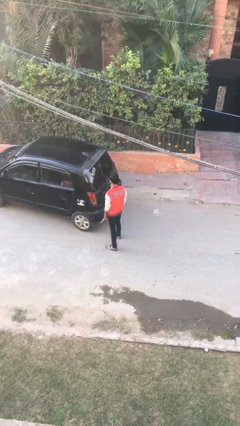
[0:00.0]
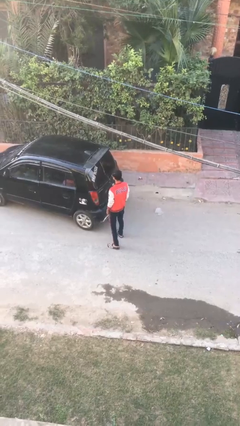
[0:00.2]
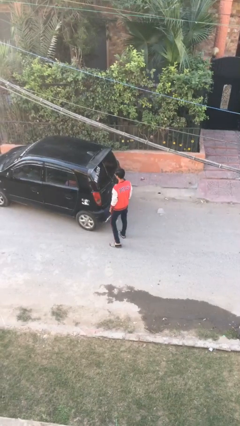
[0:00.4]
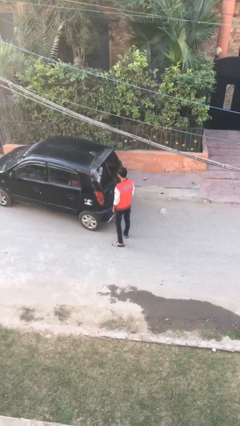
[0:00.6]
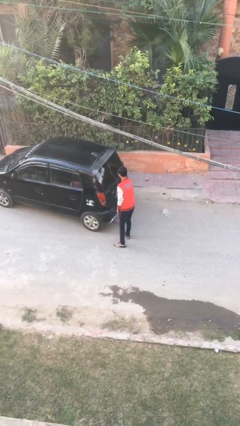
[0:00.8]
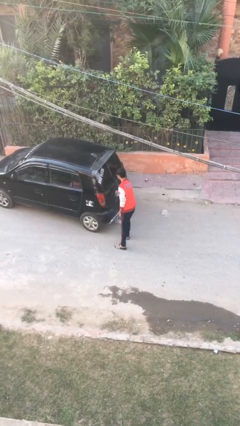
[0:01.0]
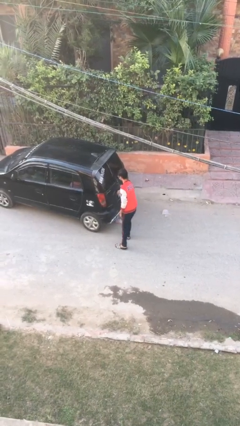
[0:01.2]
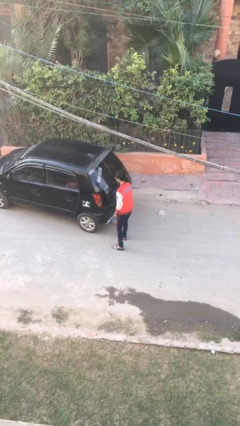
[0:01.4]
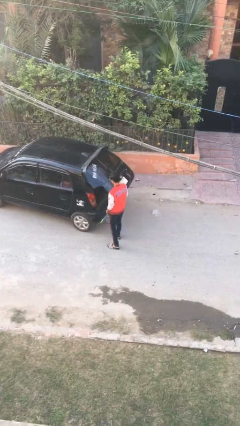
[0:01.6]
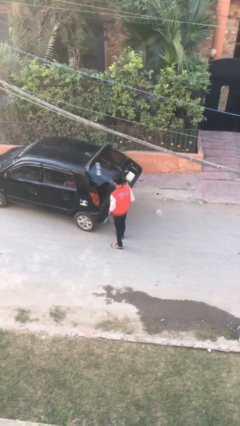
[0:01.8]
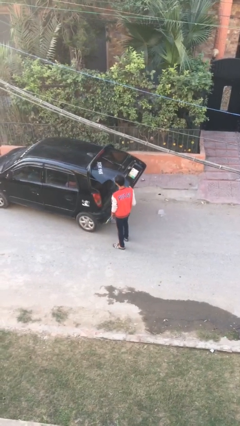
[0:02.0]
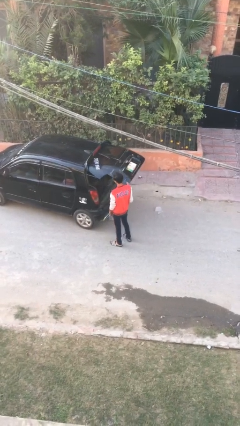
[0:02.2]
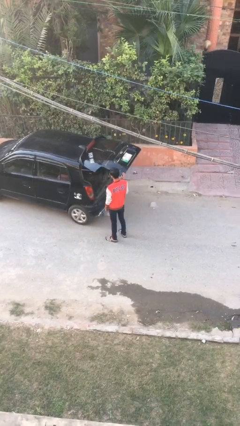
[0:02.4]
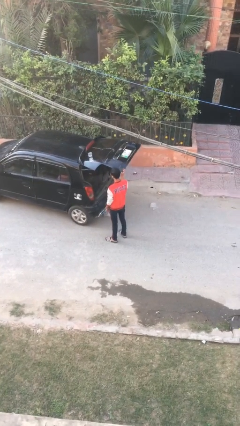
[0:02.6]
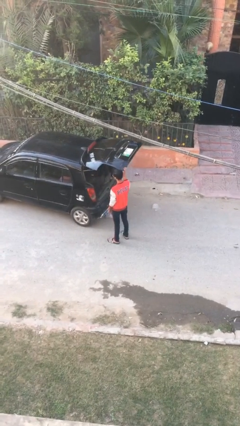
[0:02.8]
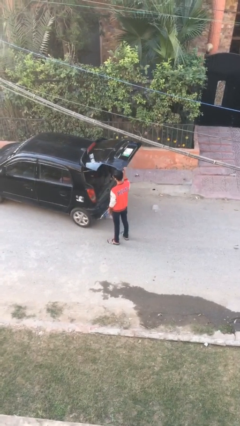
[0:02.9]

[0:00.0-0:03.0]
person opens car trunk

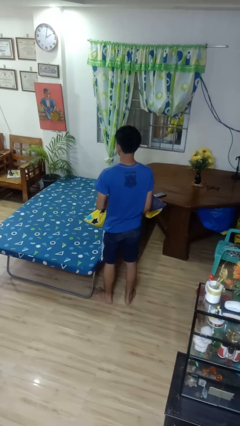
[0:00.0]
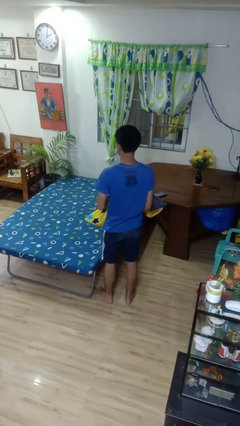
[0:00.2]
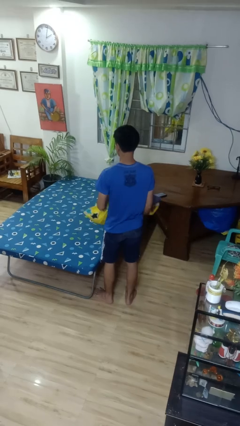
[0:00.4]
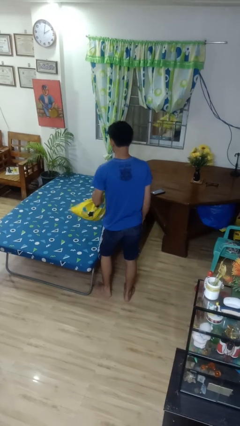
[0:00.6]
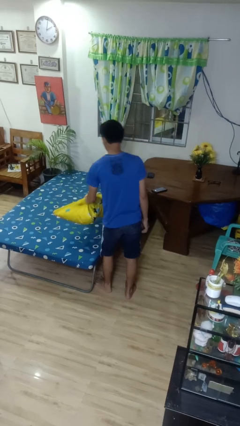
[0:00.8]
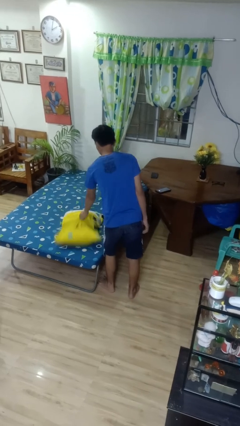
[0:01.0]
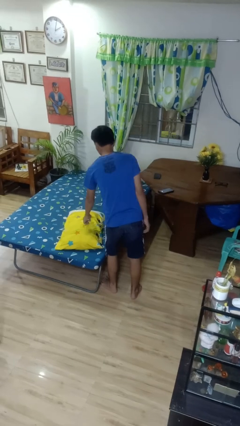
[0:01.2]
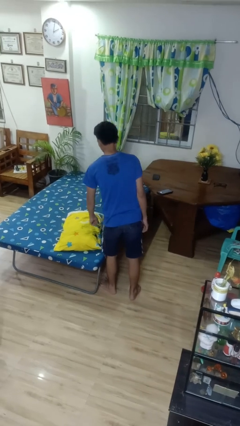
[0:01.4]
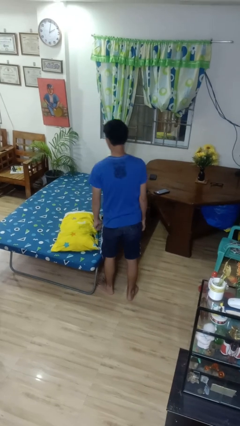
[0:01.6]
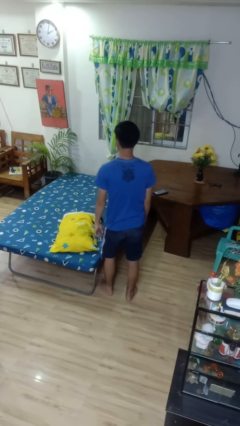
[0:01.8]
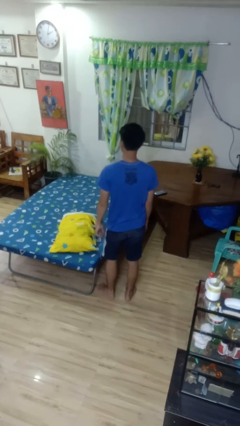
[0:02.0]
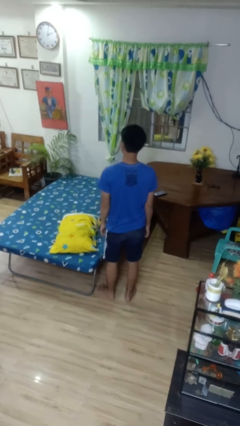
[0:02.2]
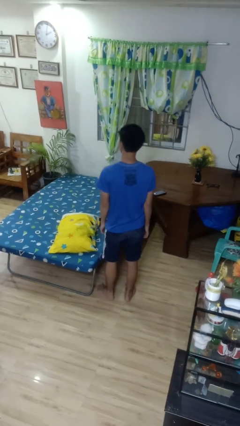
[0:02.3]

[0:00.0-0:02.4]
person puts down object on bed

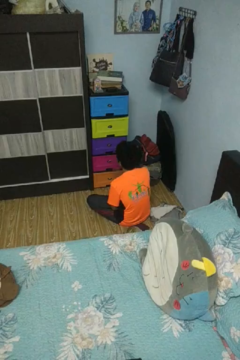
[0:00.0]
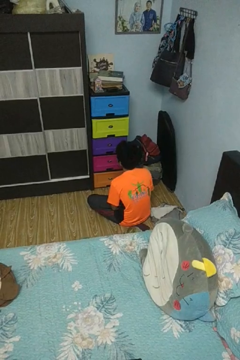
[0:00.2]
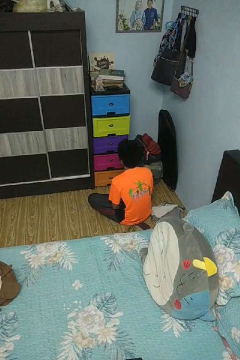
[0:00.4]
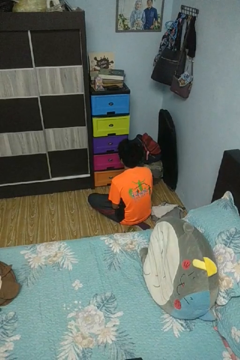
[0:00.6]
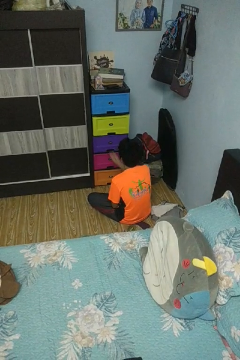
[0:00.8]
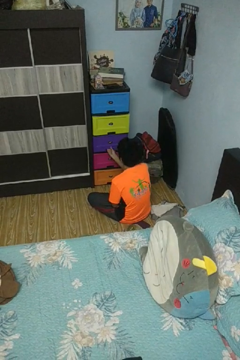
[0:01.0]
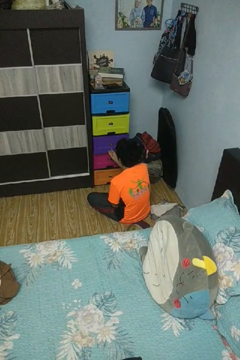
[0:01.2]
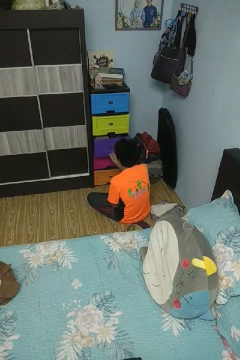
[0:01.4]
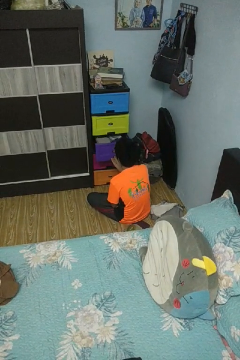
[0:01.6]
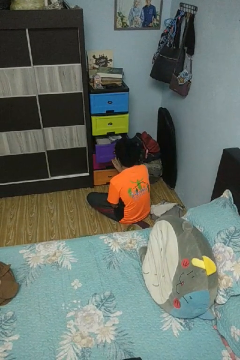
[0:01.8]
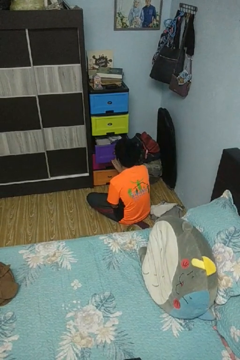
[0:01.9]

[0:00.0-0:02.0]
person opens dresser drawer

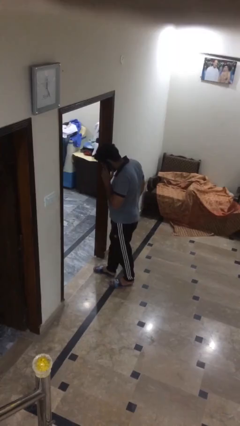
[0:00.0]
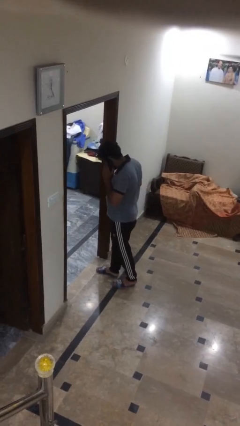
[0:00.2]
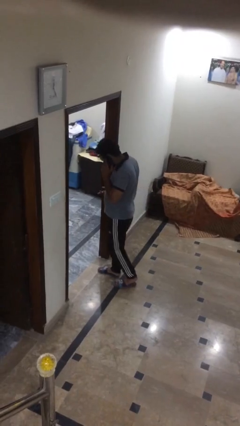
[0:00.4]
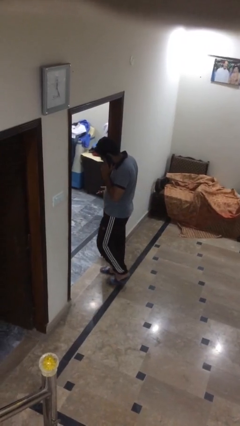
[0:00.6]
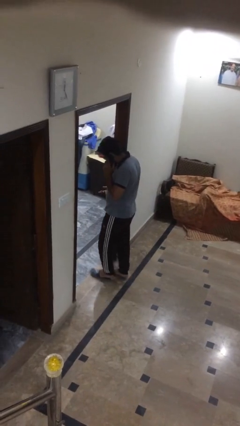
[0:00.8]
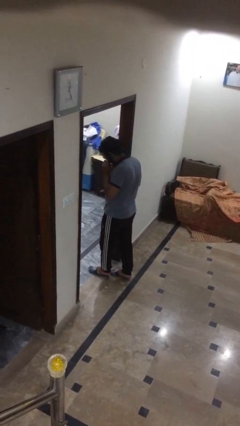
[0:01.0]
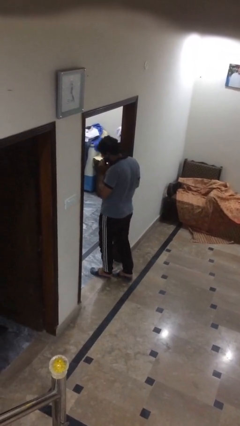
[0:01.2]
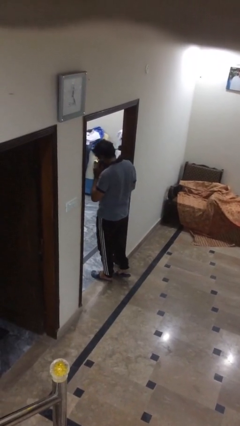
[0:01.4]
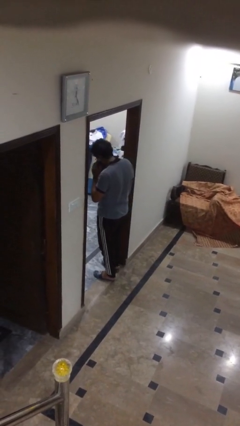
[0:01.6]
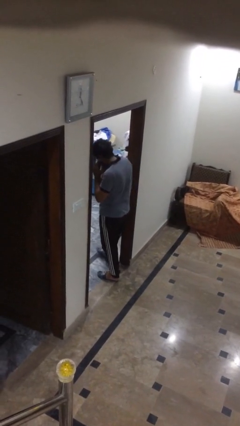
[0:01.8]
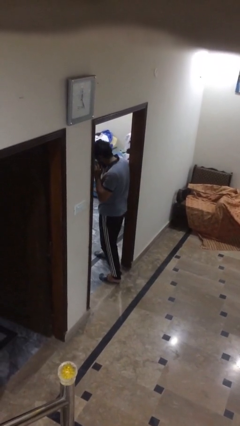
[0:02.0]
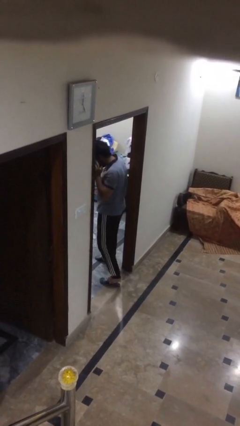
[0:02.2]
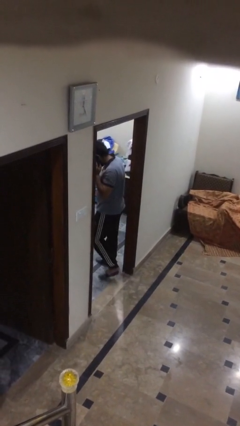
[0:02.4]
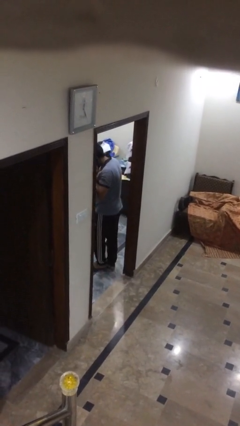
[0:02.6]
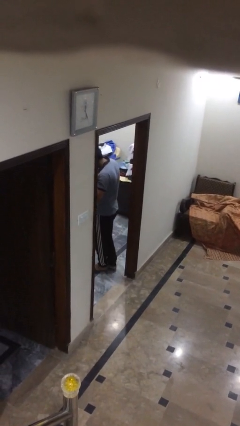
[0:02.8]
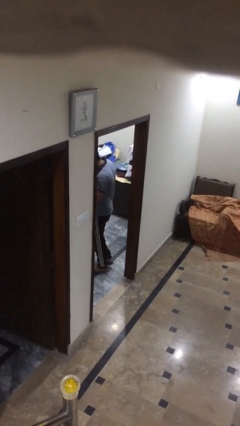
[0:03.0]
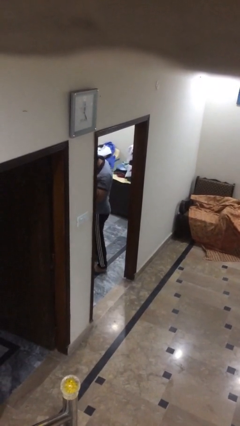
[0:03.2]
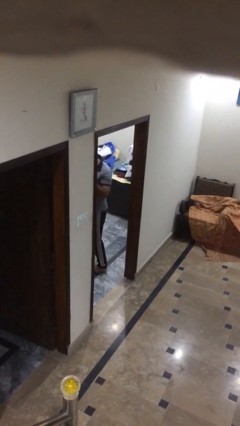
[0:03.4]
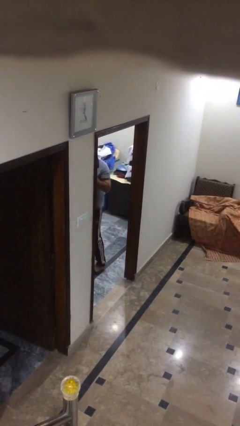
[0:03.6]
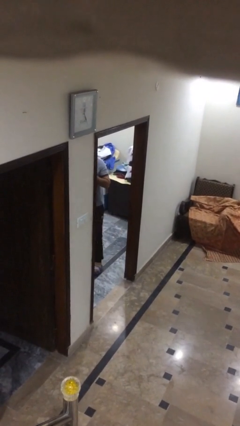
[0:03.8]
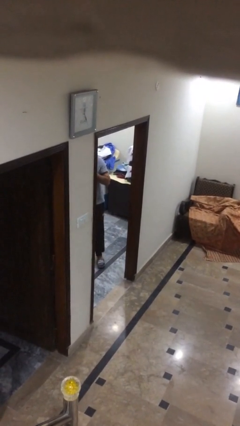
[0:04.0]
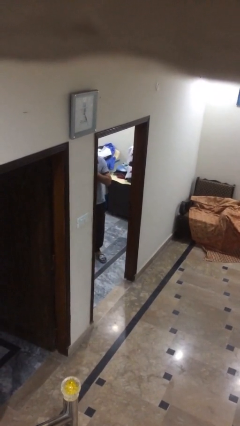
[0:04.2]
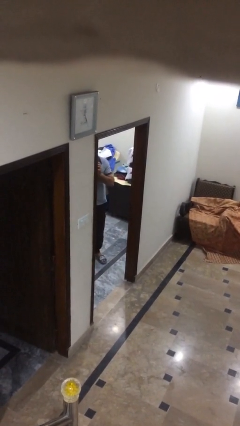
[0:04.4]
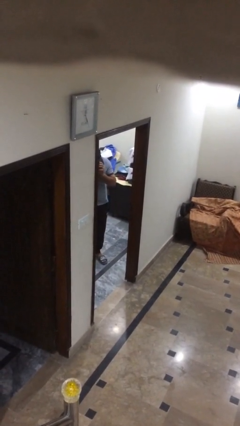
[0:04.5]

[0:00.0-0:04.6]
person exits scene through structure

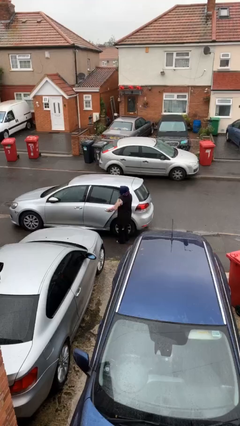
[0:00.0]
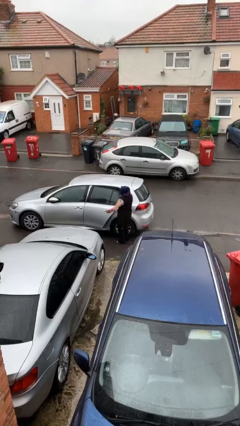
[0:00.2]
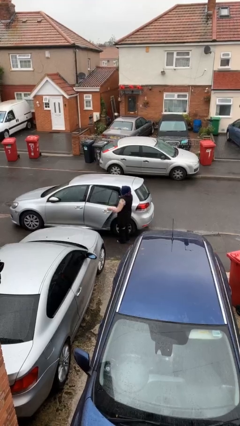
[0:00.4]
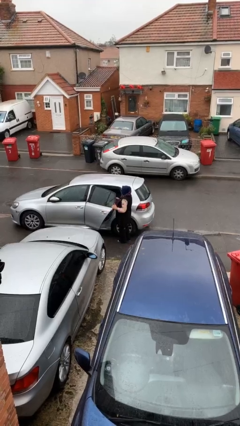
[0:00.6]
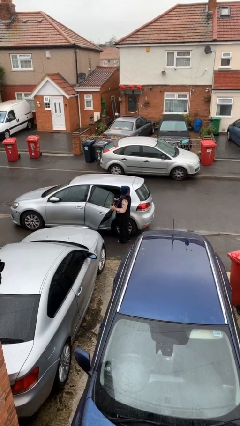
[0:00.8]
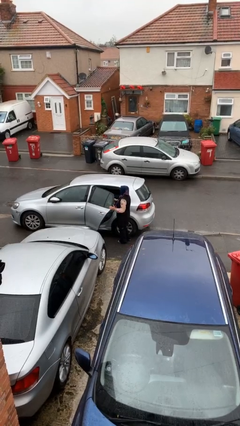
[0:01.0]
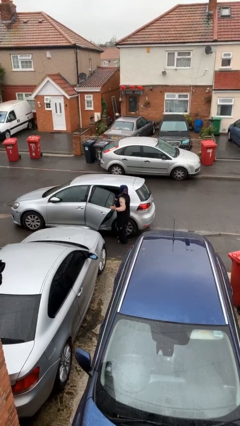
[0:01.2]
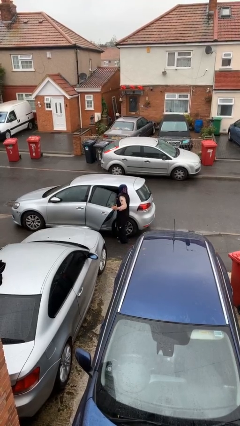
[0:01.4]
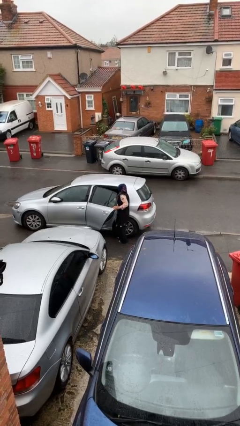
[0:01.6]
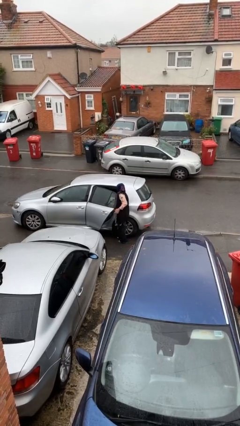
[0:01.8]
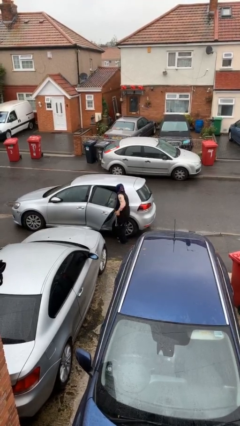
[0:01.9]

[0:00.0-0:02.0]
person opens car door

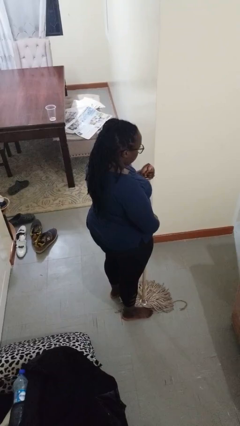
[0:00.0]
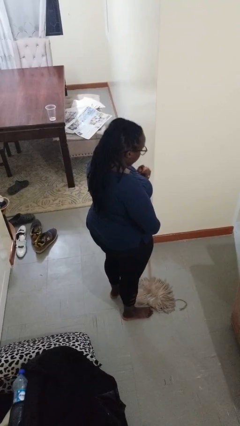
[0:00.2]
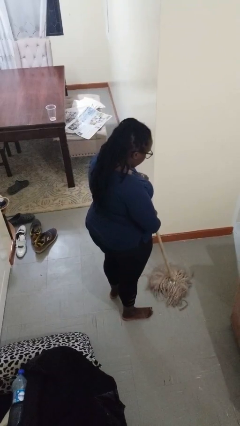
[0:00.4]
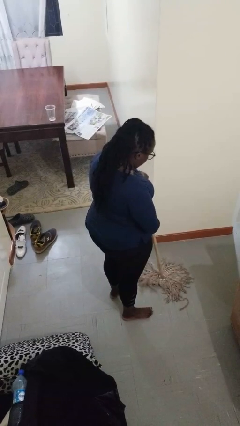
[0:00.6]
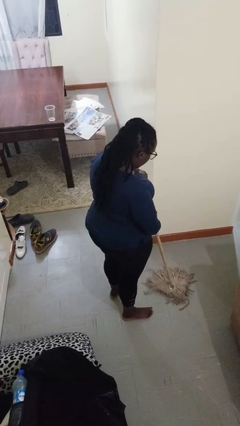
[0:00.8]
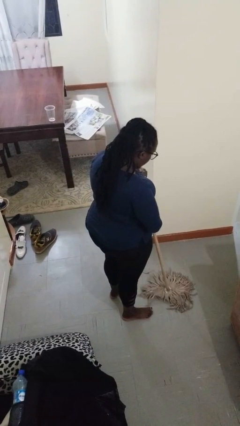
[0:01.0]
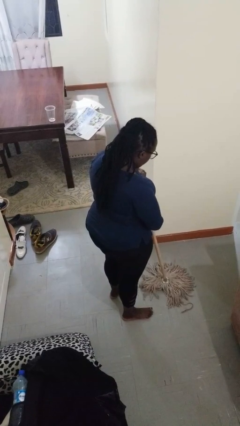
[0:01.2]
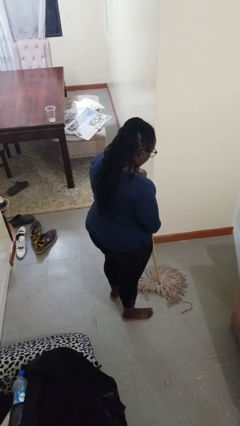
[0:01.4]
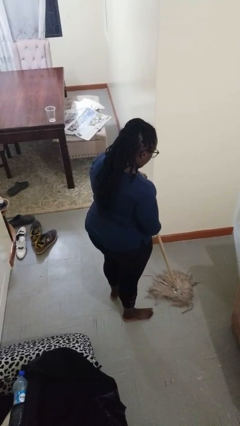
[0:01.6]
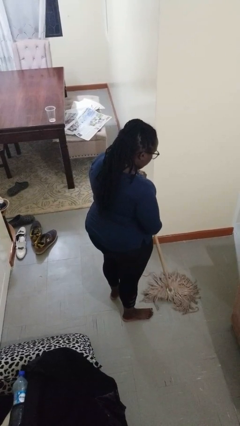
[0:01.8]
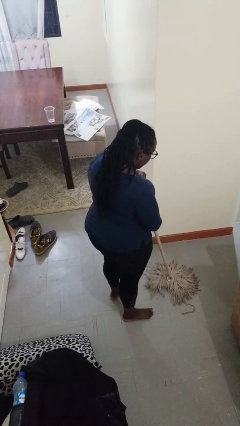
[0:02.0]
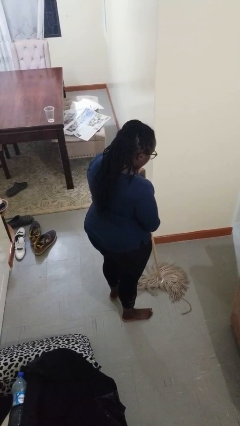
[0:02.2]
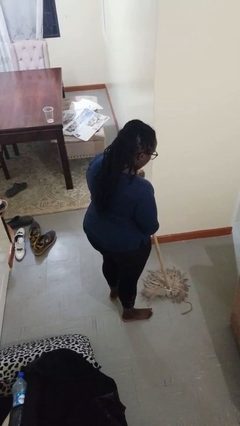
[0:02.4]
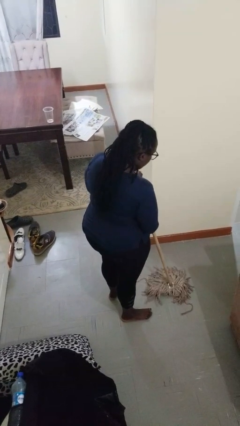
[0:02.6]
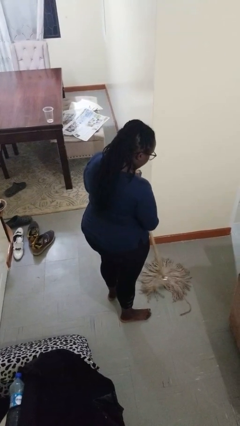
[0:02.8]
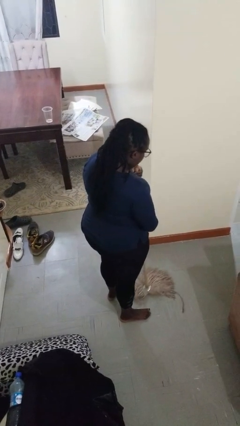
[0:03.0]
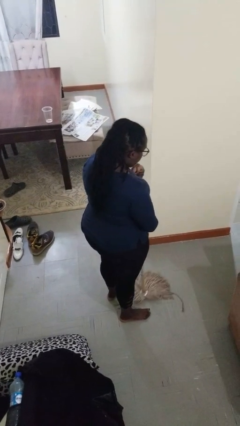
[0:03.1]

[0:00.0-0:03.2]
person mops

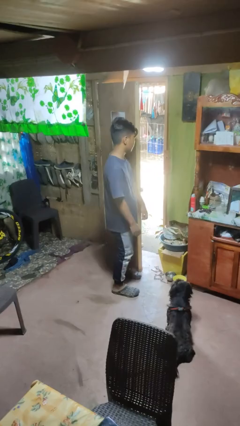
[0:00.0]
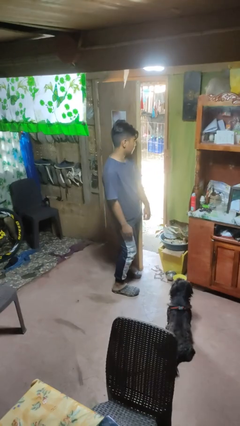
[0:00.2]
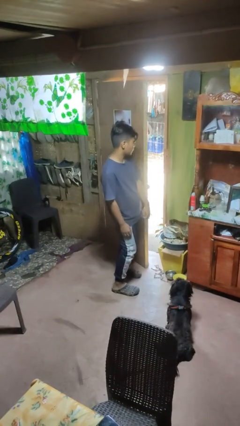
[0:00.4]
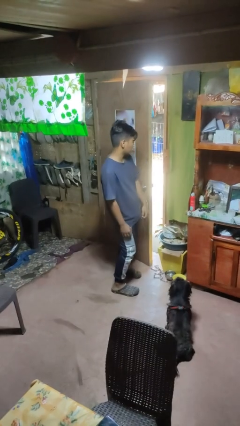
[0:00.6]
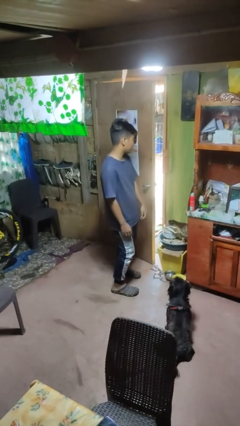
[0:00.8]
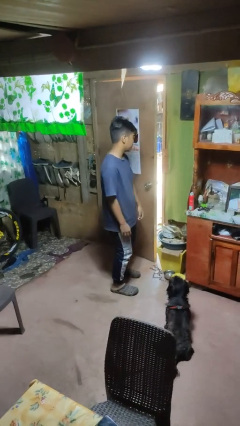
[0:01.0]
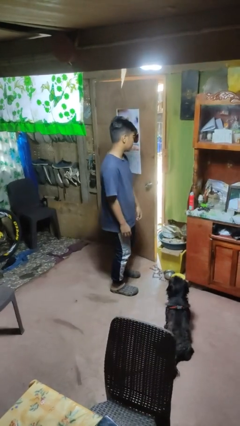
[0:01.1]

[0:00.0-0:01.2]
person closes door with hip
